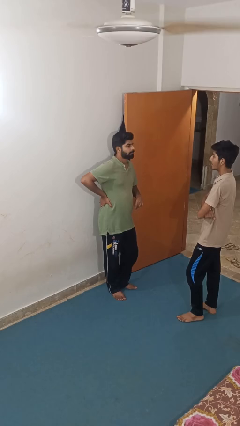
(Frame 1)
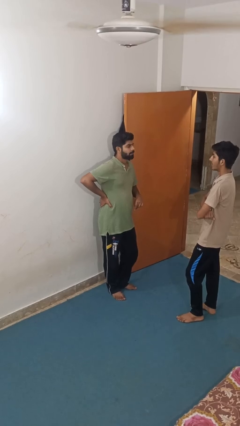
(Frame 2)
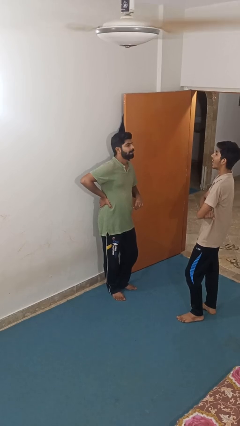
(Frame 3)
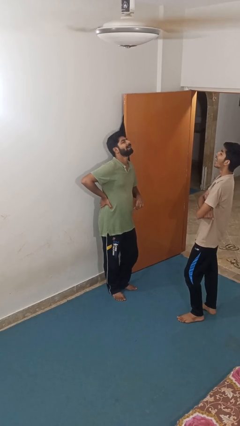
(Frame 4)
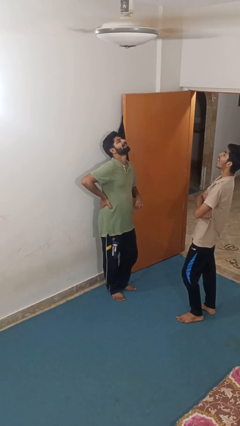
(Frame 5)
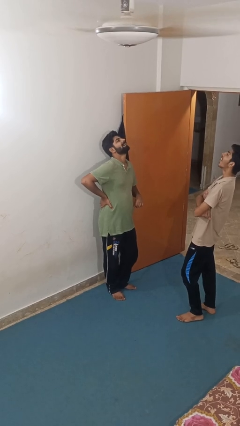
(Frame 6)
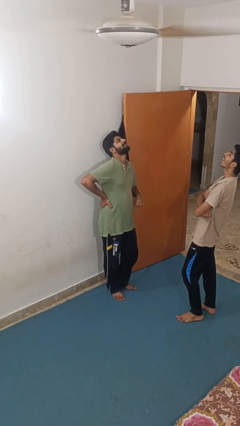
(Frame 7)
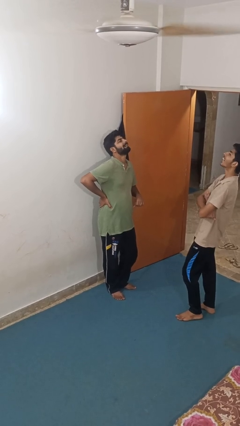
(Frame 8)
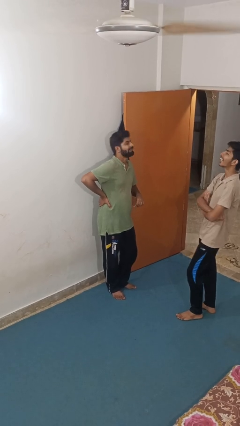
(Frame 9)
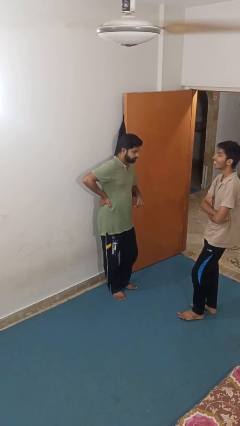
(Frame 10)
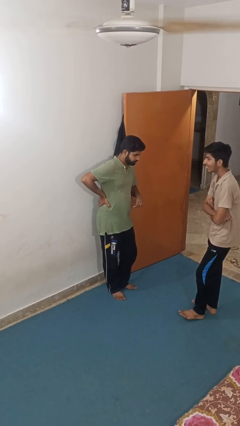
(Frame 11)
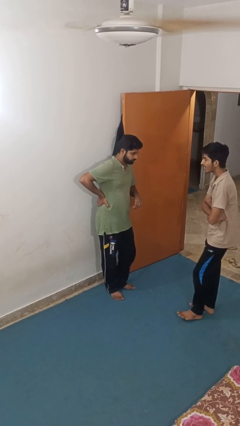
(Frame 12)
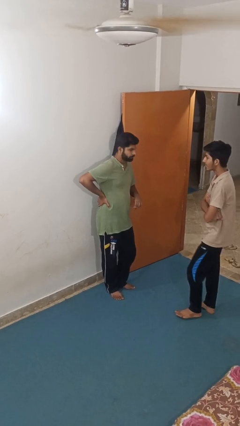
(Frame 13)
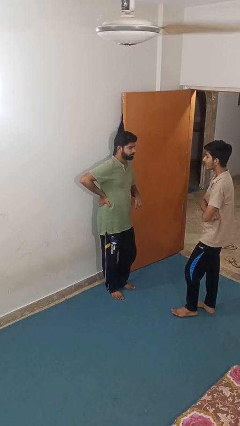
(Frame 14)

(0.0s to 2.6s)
person laughs with person

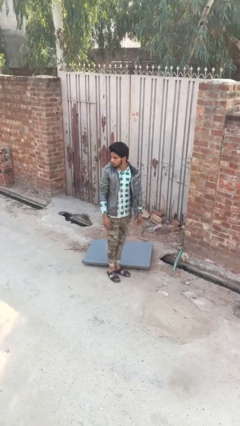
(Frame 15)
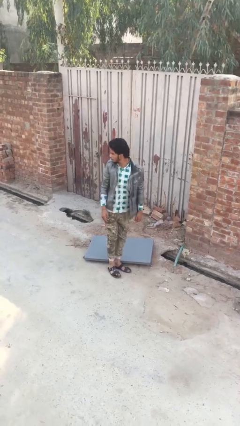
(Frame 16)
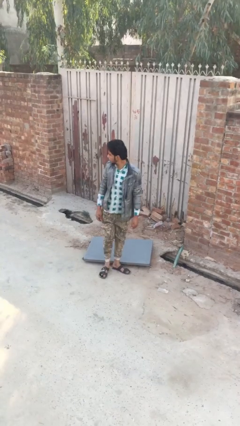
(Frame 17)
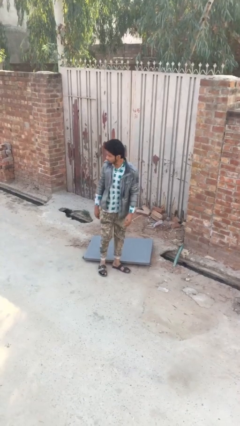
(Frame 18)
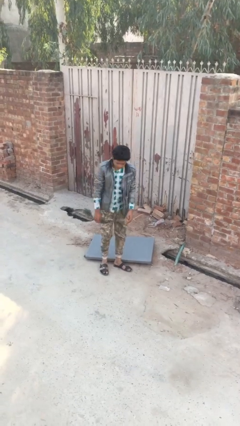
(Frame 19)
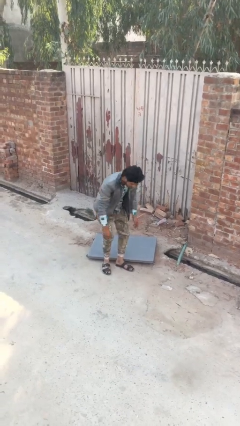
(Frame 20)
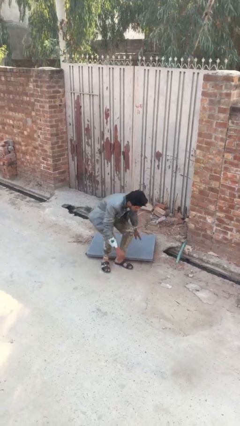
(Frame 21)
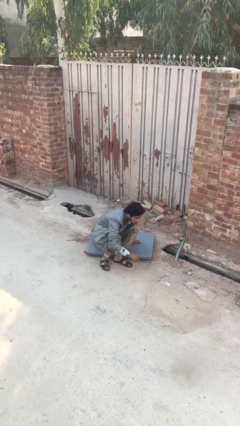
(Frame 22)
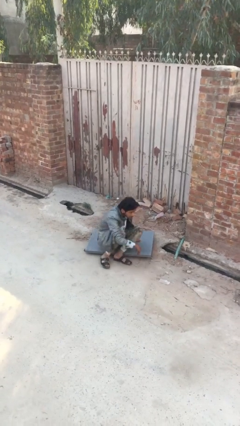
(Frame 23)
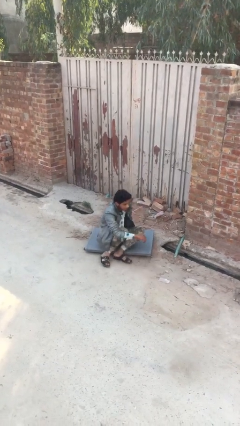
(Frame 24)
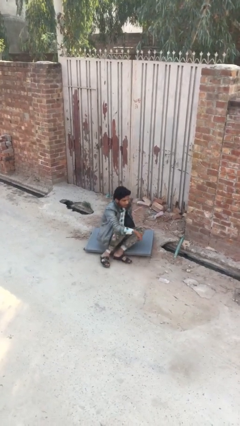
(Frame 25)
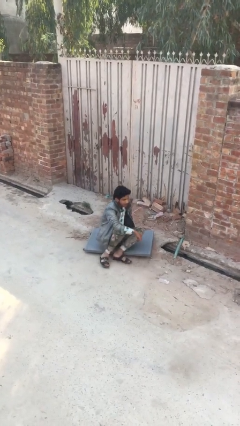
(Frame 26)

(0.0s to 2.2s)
person sits down

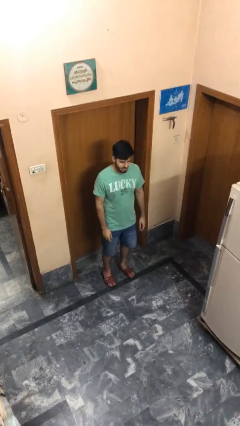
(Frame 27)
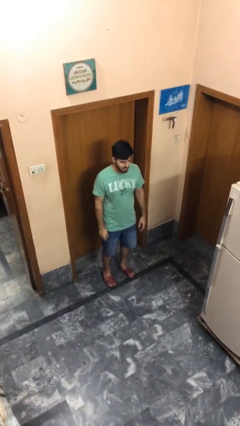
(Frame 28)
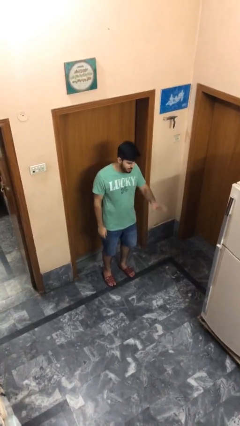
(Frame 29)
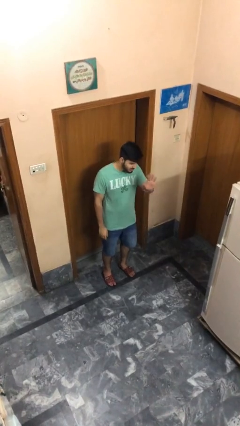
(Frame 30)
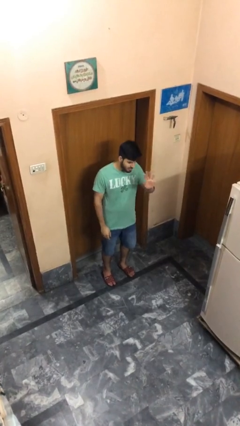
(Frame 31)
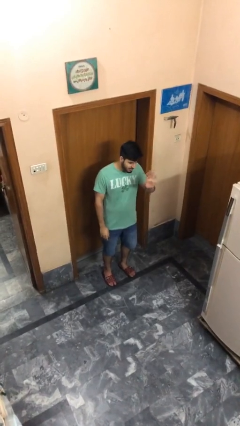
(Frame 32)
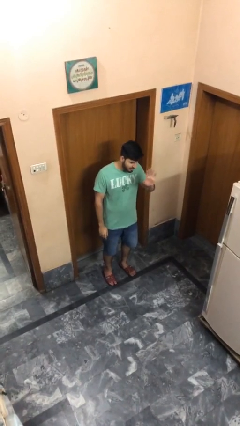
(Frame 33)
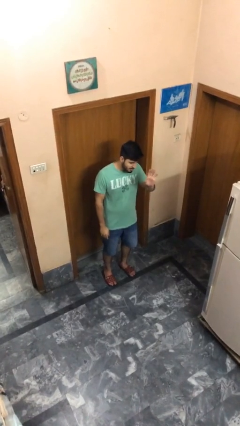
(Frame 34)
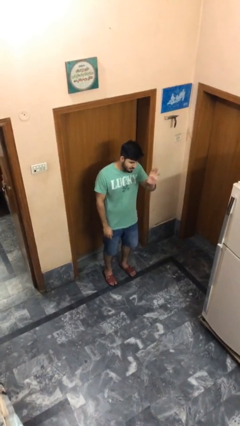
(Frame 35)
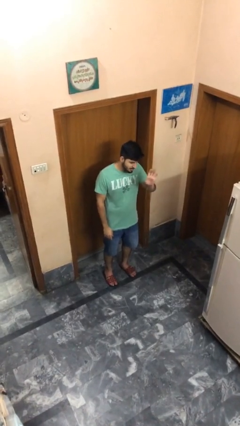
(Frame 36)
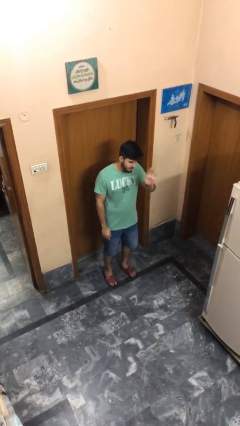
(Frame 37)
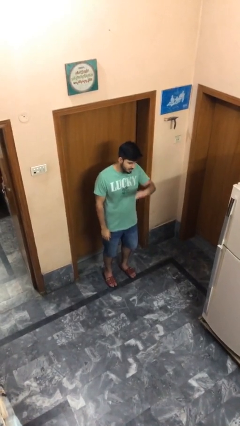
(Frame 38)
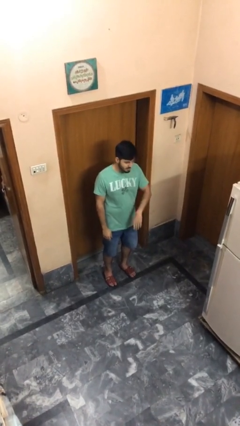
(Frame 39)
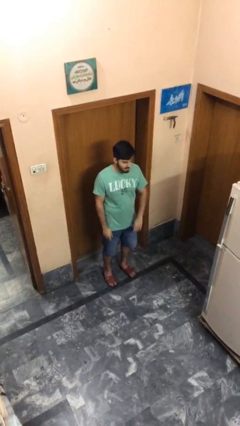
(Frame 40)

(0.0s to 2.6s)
person waves at person

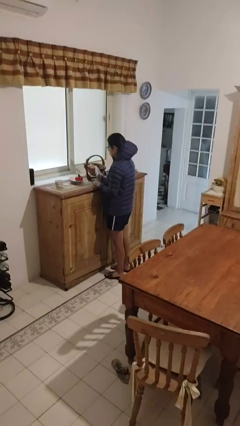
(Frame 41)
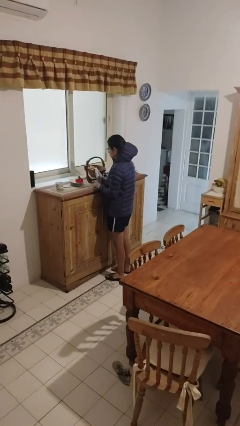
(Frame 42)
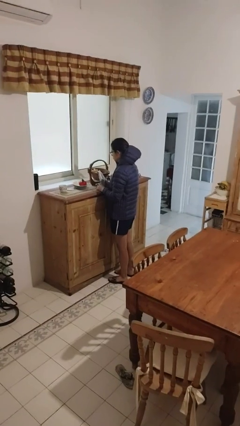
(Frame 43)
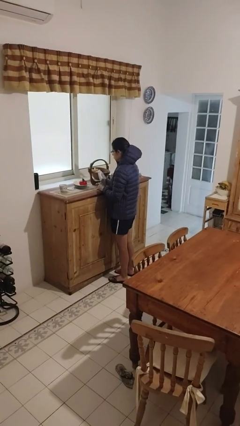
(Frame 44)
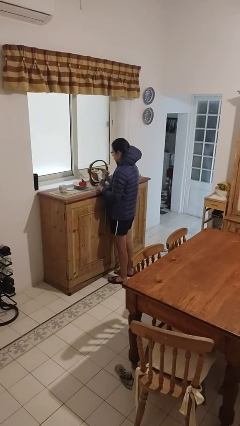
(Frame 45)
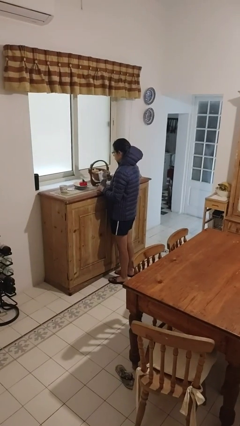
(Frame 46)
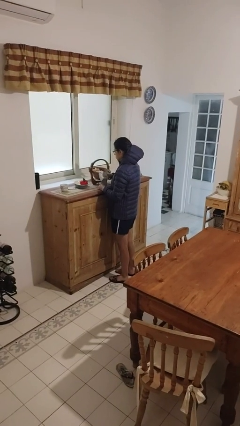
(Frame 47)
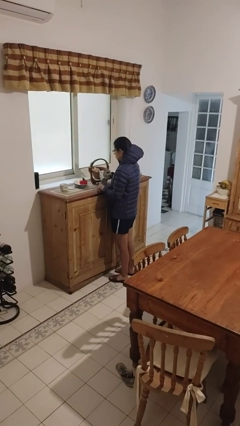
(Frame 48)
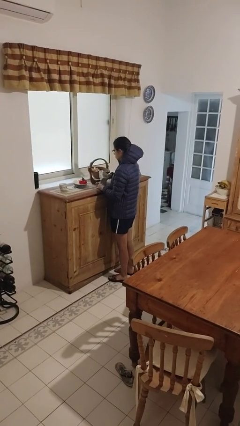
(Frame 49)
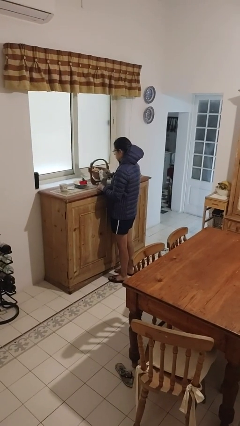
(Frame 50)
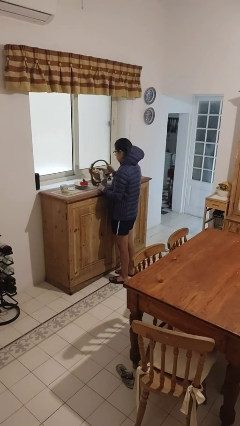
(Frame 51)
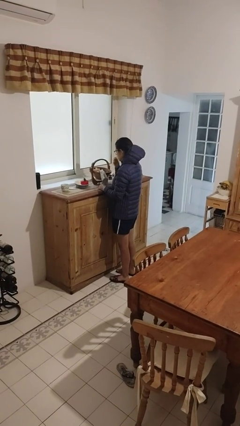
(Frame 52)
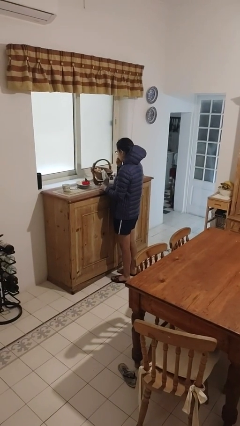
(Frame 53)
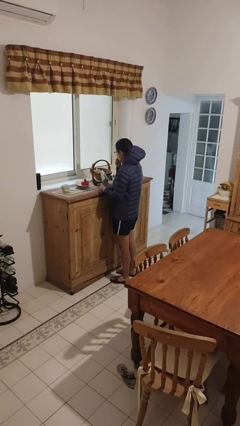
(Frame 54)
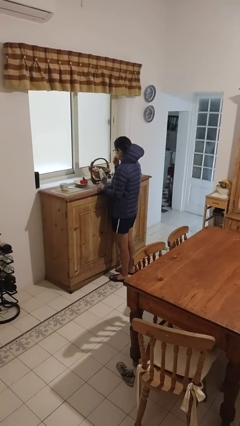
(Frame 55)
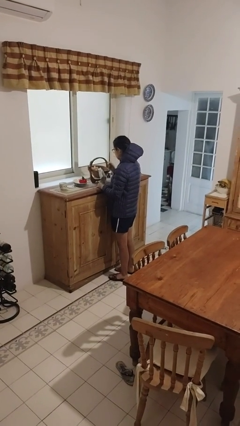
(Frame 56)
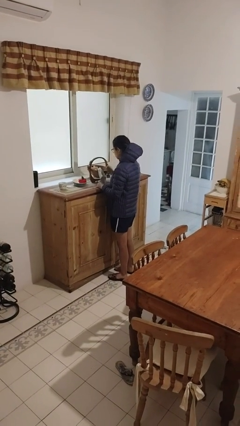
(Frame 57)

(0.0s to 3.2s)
person eats snack from bag

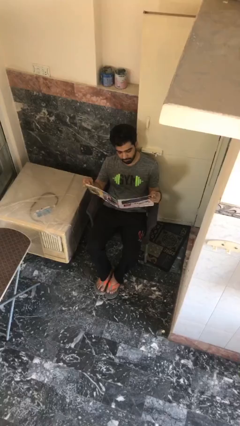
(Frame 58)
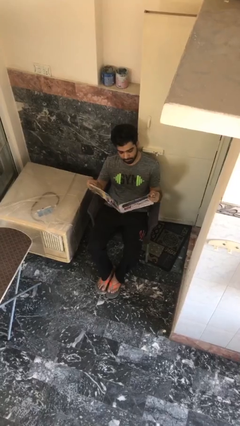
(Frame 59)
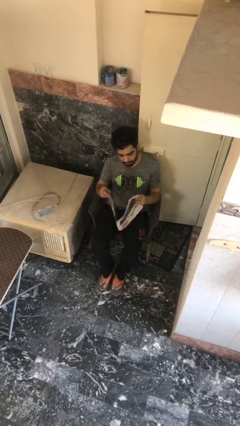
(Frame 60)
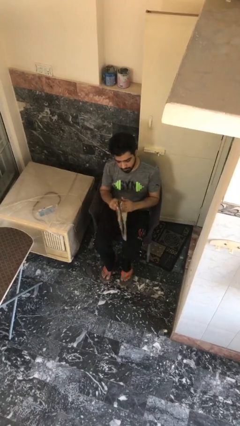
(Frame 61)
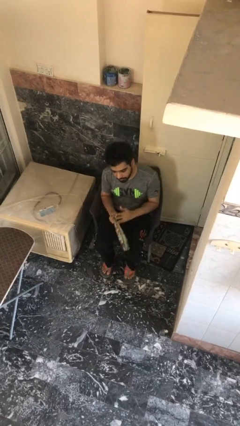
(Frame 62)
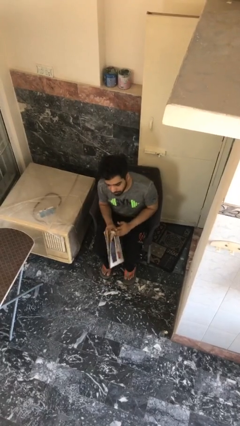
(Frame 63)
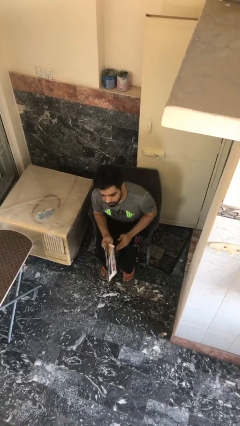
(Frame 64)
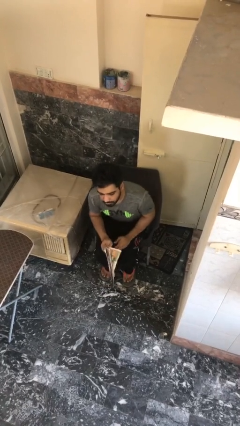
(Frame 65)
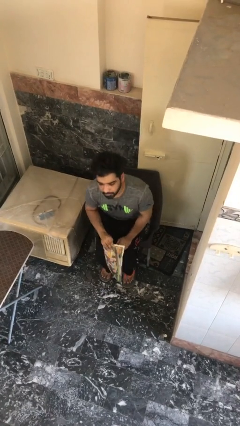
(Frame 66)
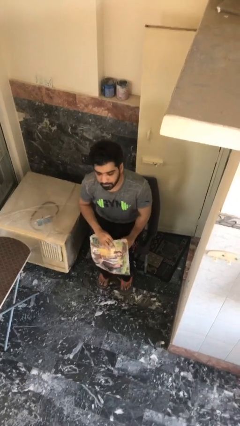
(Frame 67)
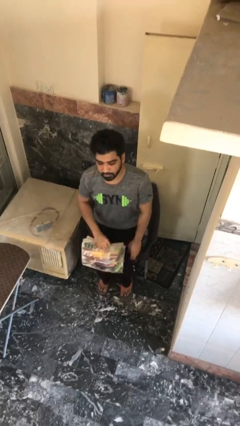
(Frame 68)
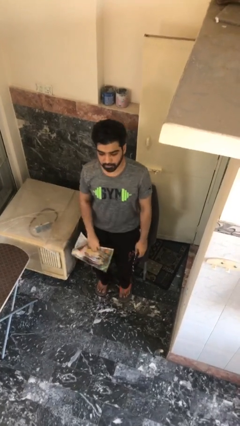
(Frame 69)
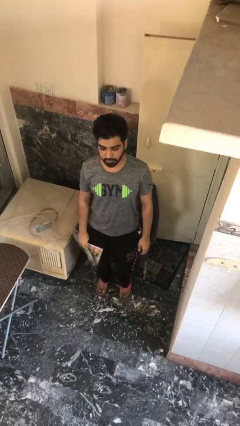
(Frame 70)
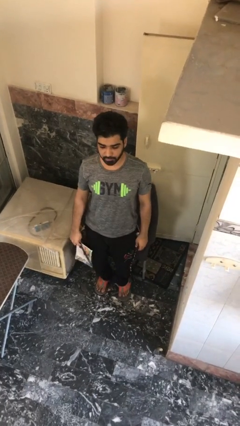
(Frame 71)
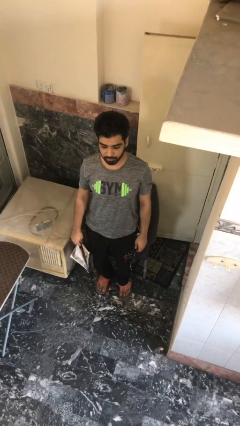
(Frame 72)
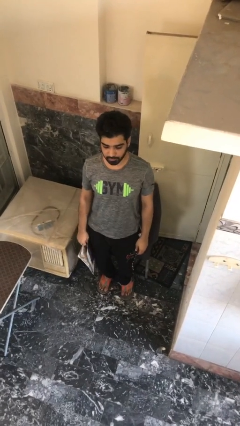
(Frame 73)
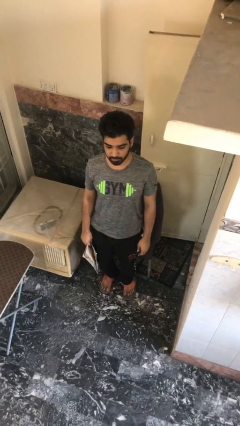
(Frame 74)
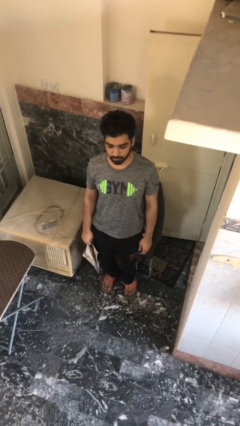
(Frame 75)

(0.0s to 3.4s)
person stands up

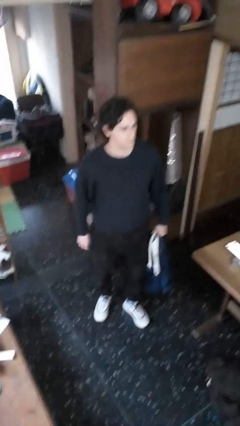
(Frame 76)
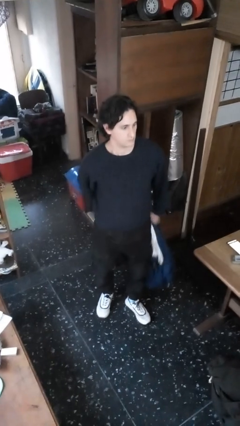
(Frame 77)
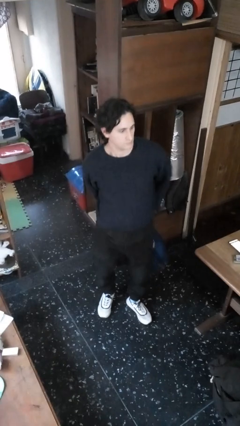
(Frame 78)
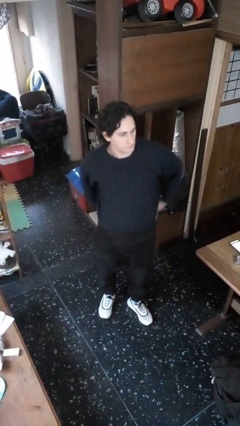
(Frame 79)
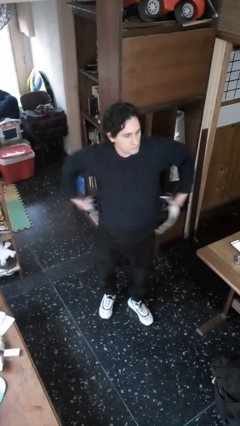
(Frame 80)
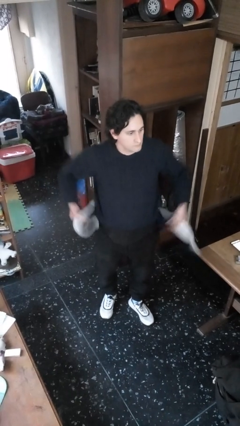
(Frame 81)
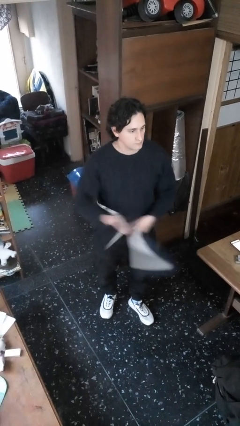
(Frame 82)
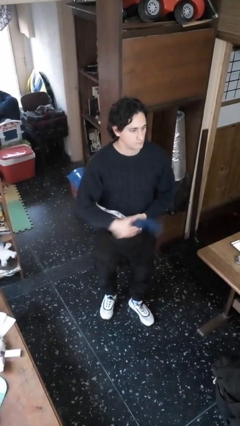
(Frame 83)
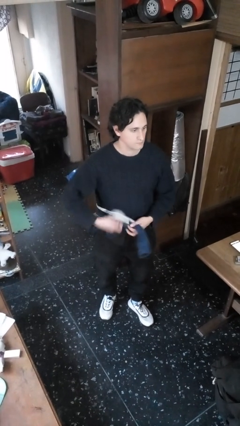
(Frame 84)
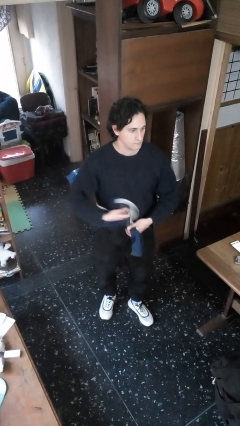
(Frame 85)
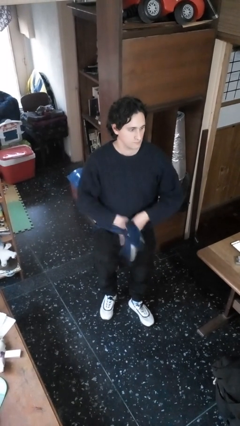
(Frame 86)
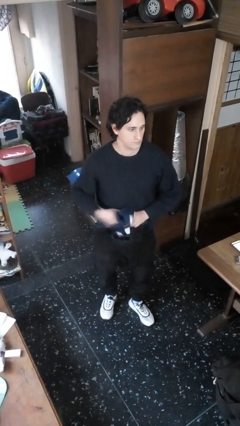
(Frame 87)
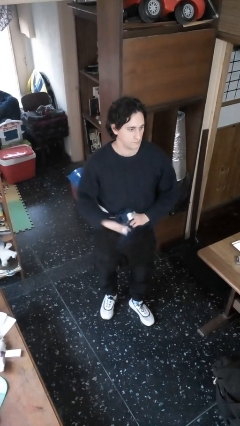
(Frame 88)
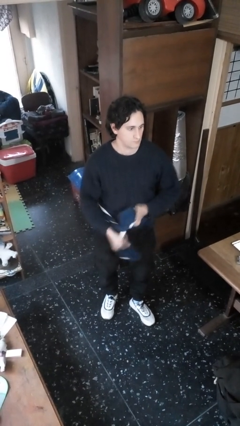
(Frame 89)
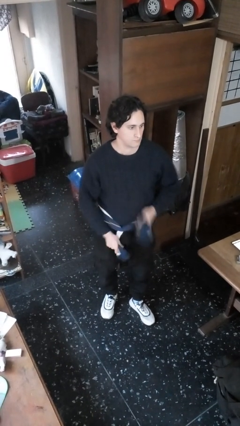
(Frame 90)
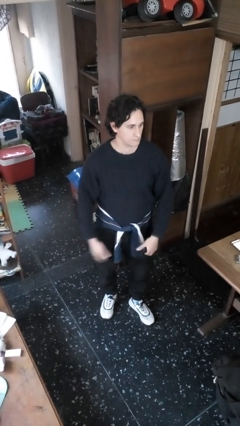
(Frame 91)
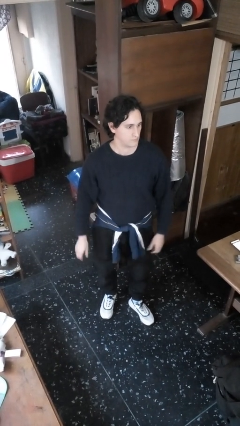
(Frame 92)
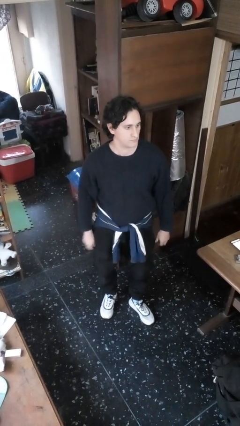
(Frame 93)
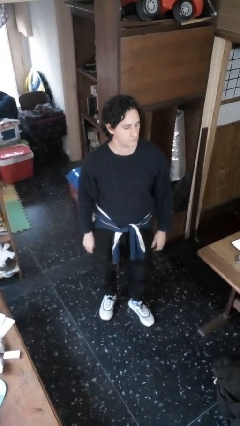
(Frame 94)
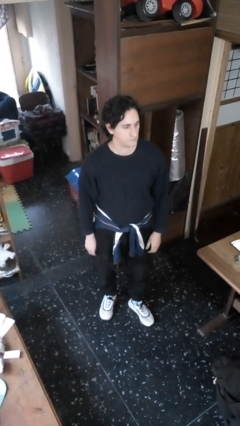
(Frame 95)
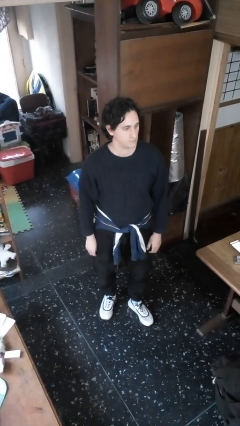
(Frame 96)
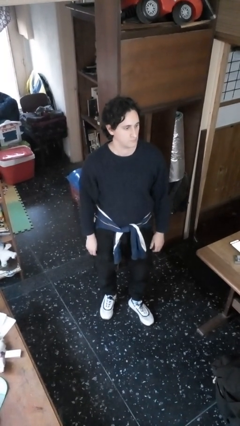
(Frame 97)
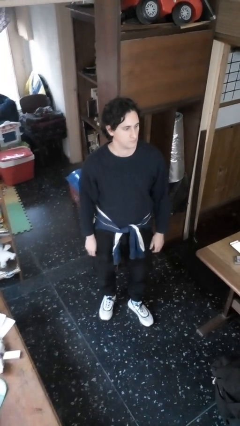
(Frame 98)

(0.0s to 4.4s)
person ties jacket around waist
